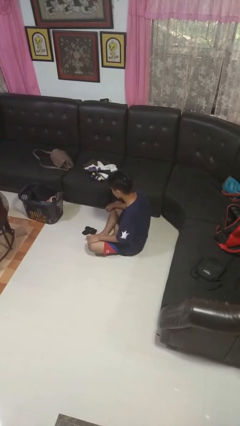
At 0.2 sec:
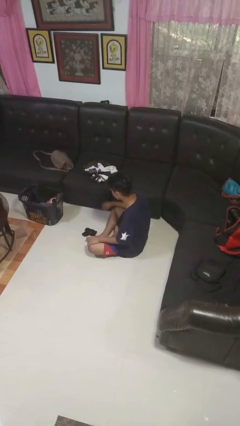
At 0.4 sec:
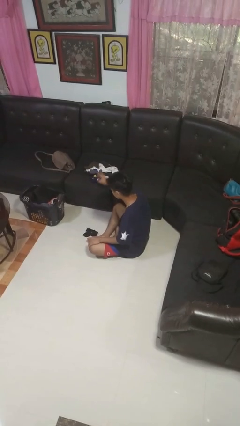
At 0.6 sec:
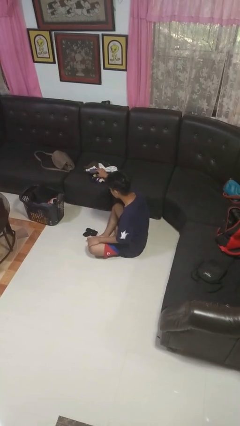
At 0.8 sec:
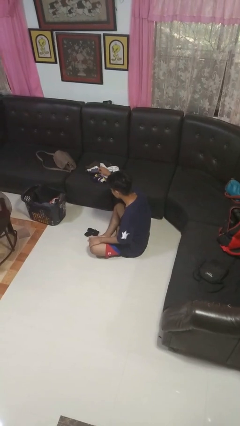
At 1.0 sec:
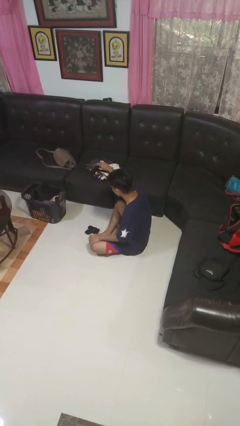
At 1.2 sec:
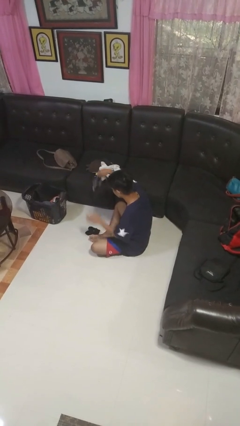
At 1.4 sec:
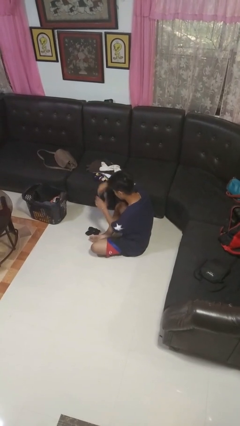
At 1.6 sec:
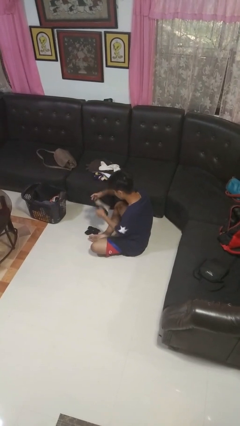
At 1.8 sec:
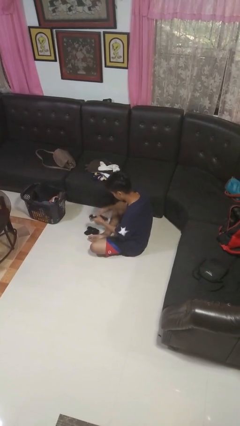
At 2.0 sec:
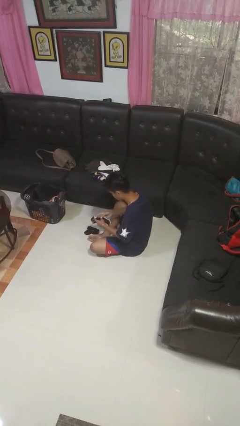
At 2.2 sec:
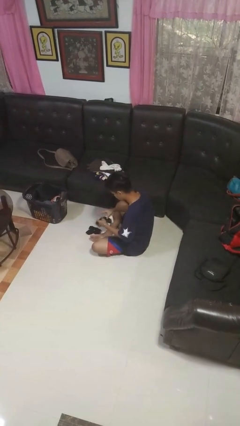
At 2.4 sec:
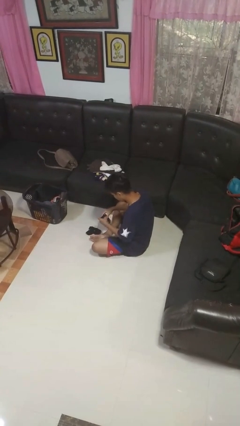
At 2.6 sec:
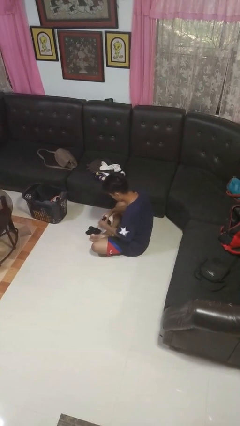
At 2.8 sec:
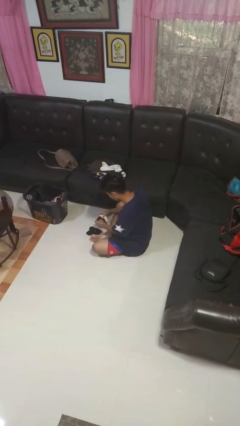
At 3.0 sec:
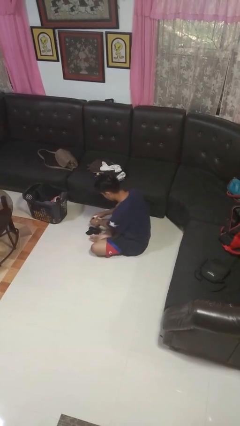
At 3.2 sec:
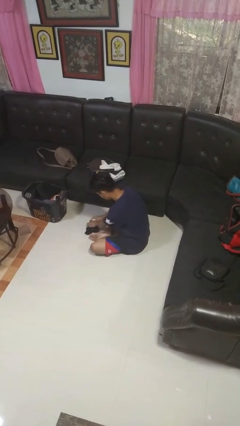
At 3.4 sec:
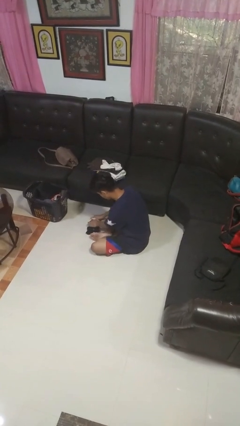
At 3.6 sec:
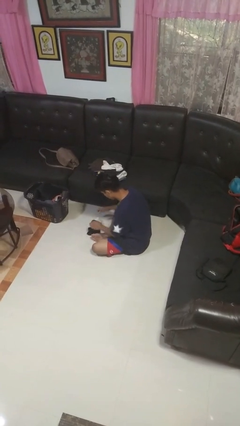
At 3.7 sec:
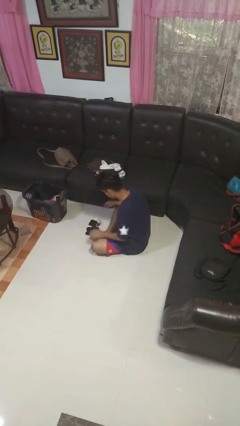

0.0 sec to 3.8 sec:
person folds socks

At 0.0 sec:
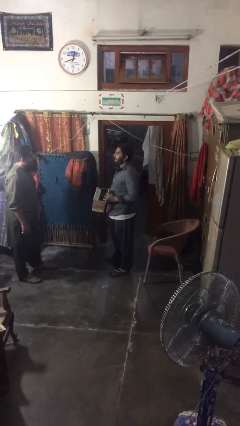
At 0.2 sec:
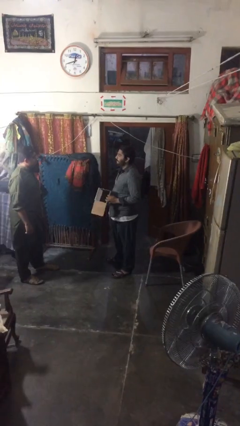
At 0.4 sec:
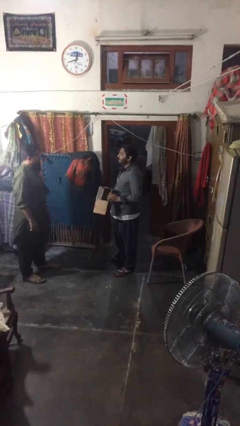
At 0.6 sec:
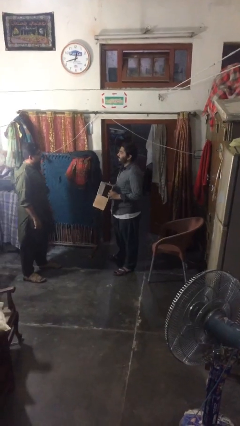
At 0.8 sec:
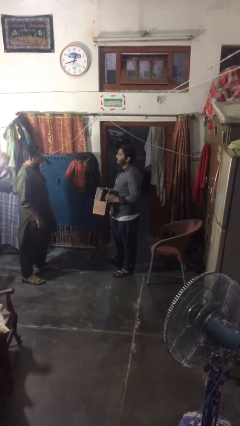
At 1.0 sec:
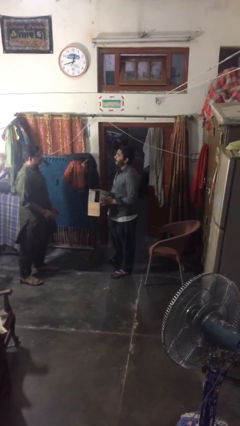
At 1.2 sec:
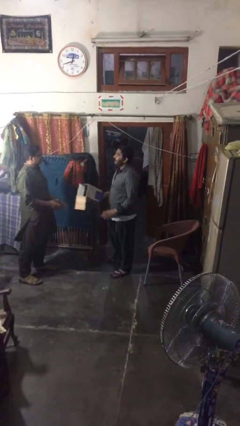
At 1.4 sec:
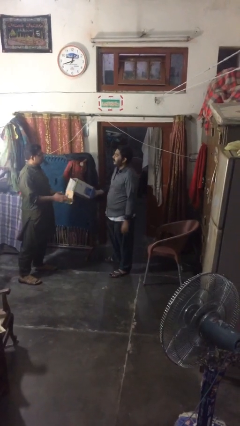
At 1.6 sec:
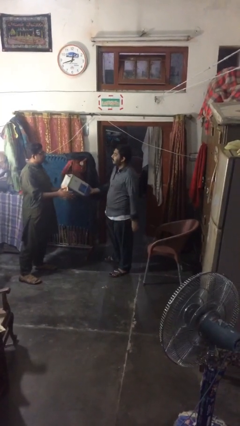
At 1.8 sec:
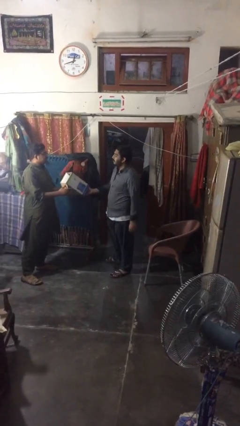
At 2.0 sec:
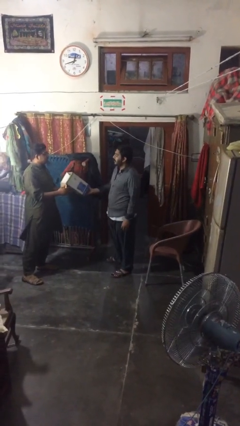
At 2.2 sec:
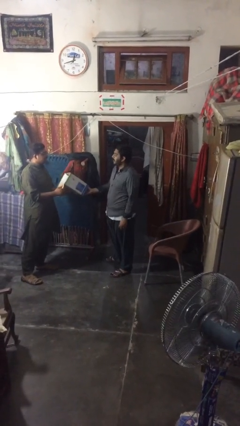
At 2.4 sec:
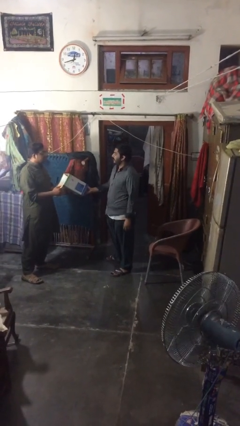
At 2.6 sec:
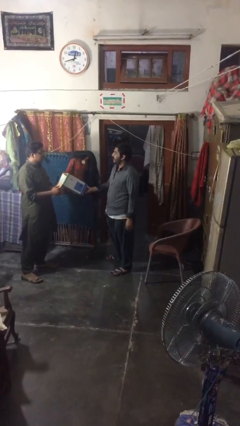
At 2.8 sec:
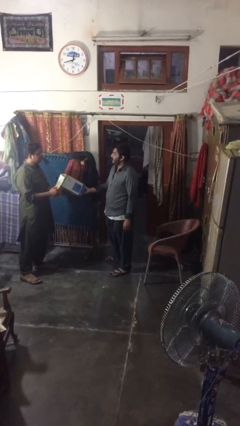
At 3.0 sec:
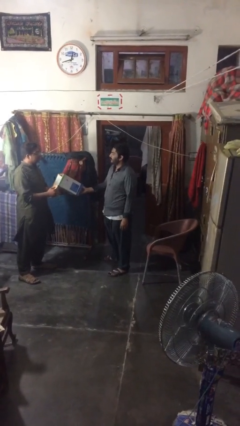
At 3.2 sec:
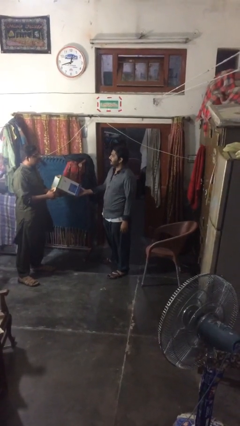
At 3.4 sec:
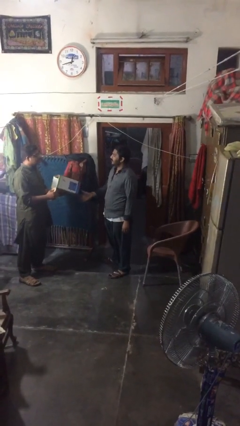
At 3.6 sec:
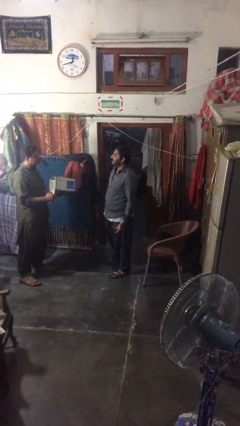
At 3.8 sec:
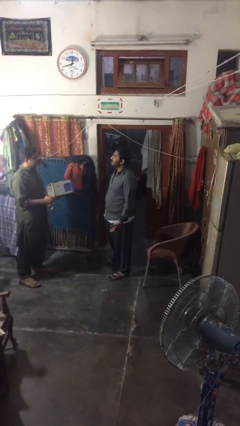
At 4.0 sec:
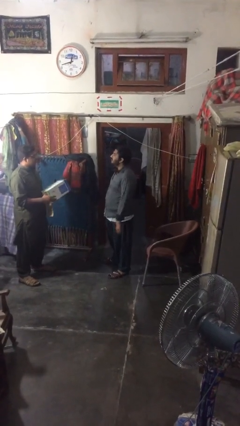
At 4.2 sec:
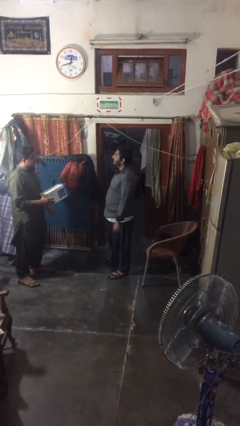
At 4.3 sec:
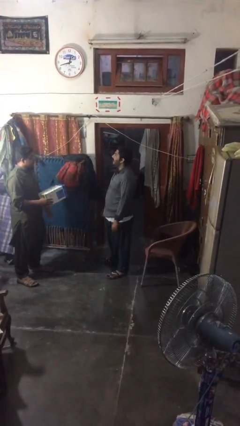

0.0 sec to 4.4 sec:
person transfers object to person

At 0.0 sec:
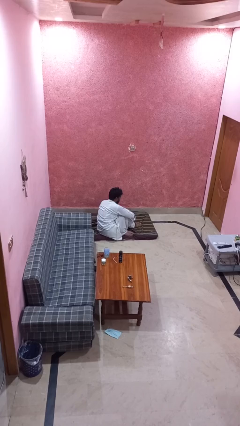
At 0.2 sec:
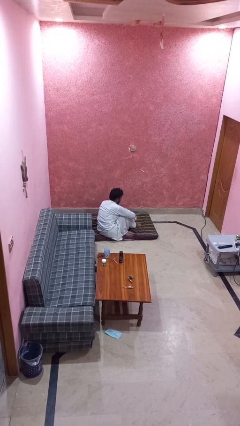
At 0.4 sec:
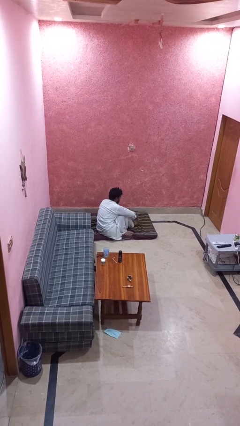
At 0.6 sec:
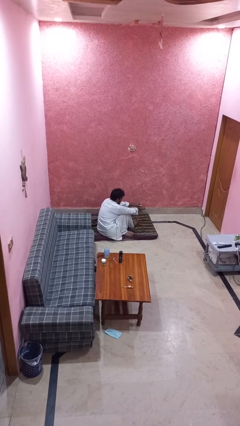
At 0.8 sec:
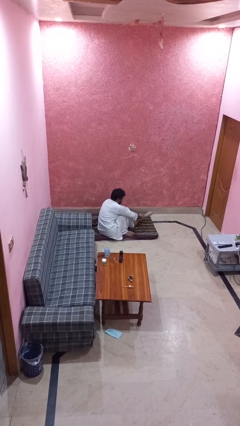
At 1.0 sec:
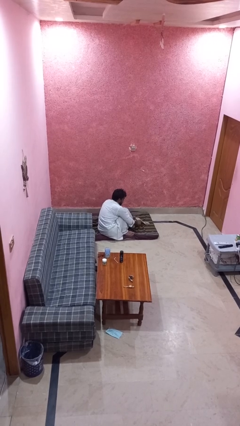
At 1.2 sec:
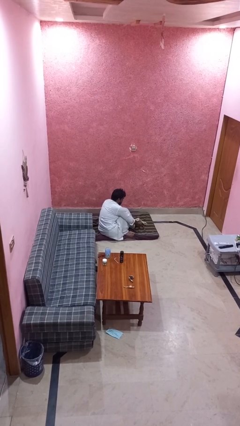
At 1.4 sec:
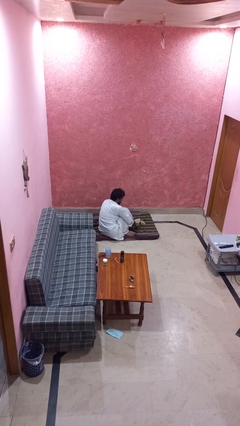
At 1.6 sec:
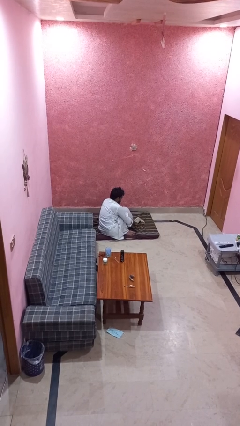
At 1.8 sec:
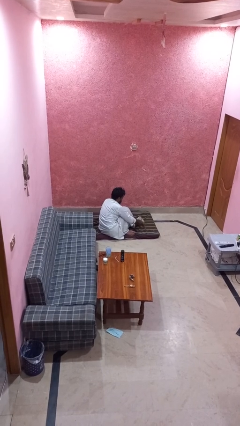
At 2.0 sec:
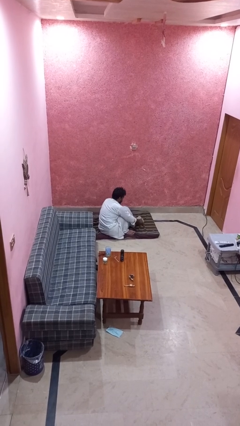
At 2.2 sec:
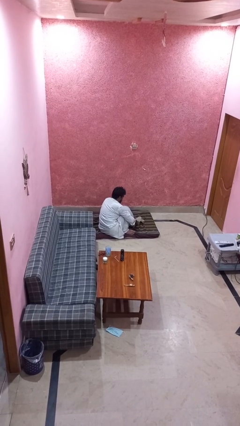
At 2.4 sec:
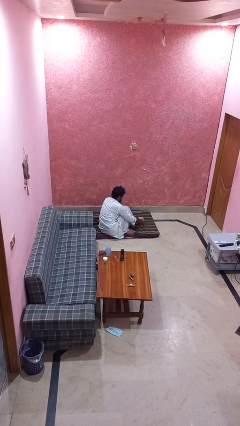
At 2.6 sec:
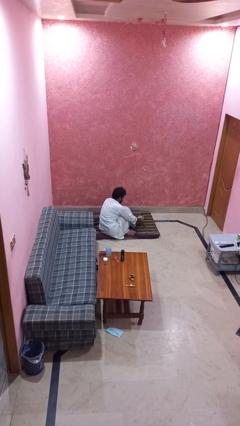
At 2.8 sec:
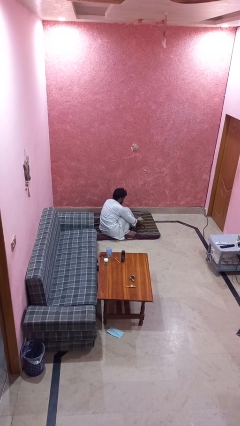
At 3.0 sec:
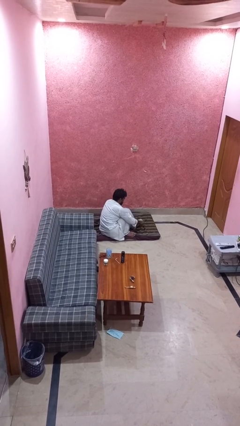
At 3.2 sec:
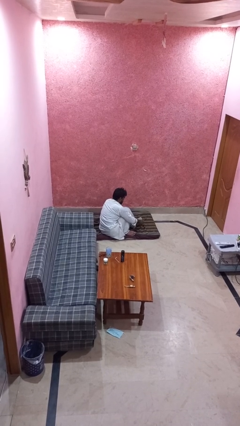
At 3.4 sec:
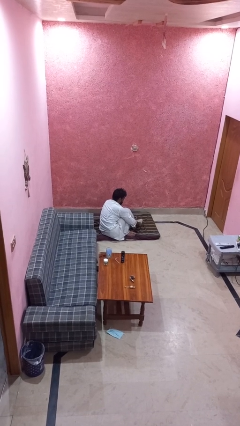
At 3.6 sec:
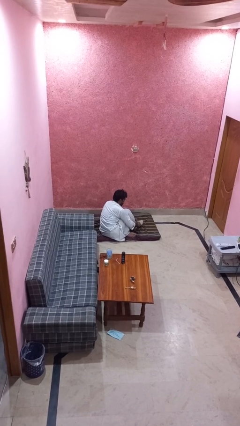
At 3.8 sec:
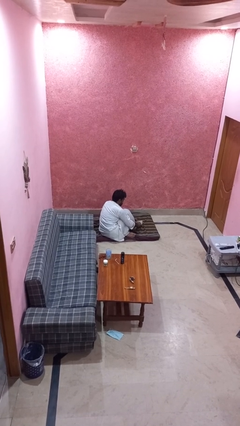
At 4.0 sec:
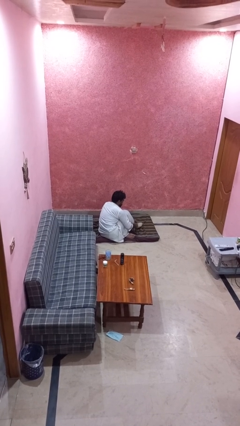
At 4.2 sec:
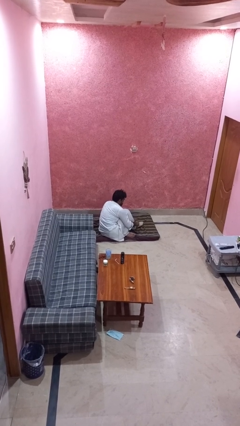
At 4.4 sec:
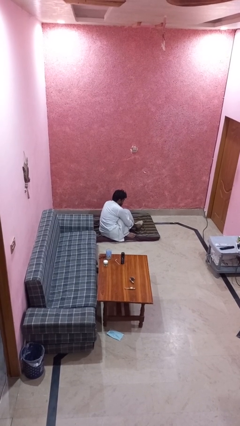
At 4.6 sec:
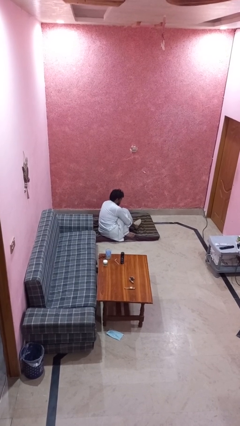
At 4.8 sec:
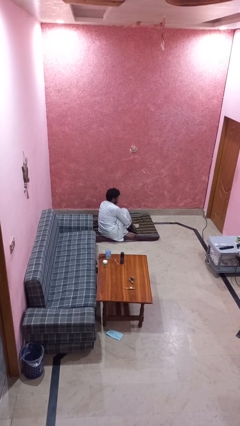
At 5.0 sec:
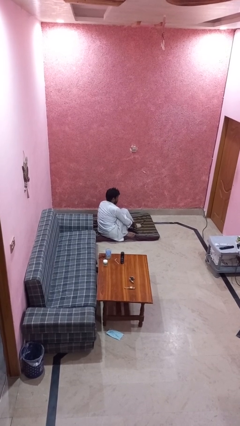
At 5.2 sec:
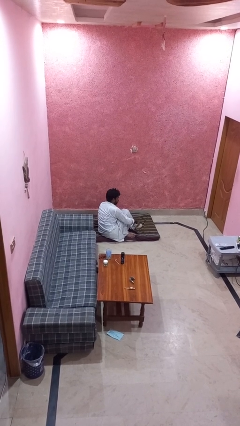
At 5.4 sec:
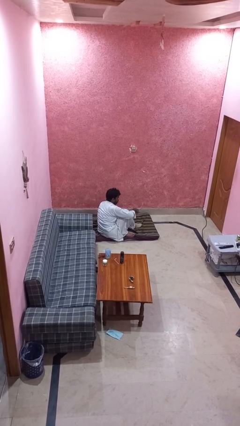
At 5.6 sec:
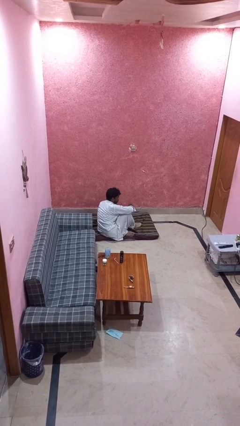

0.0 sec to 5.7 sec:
person puts on socks

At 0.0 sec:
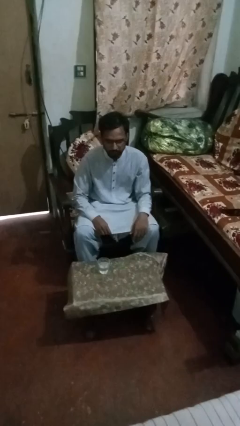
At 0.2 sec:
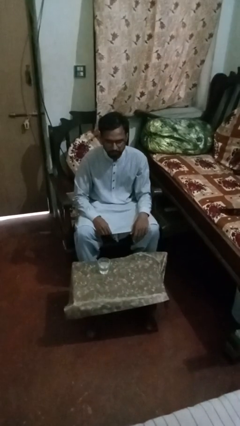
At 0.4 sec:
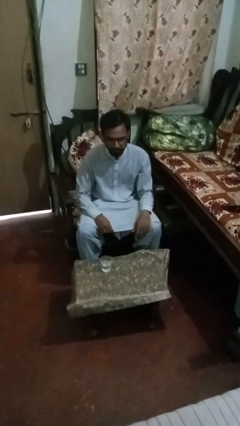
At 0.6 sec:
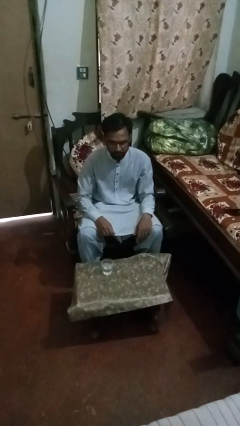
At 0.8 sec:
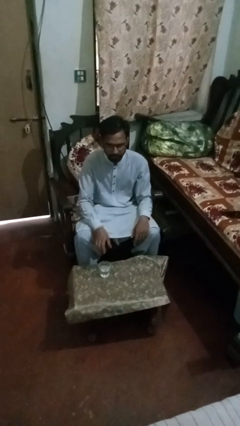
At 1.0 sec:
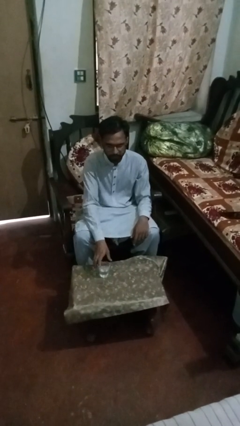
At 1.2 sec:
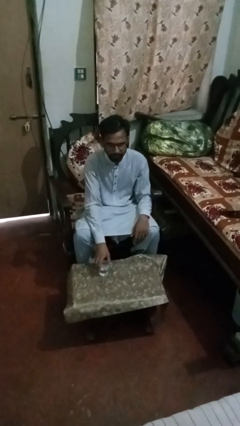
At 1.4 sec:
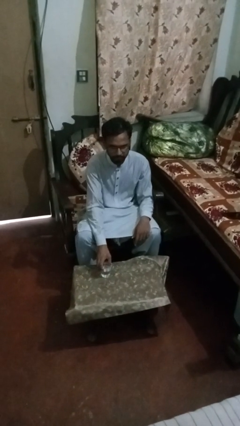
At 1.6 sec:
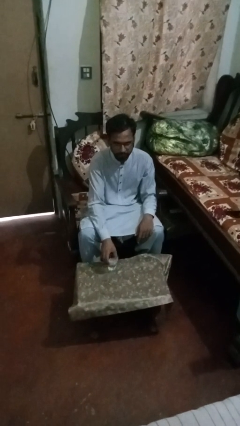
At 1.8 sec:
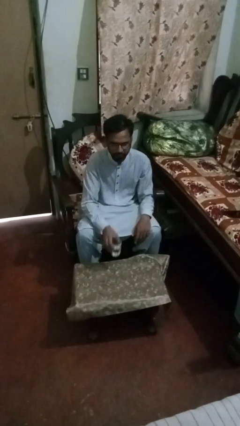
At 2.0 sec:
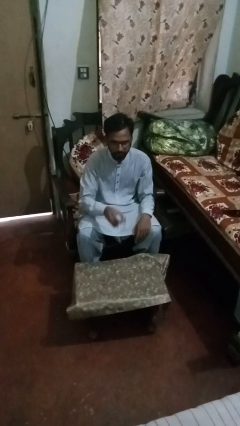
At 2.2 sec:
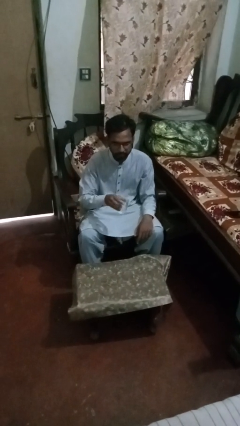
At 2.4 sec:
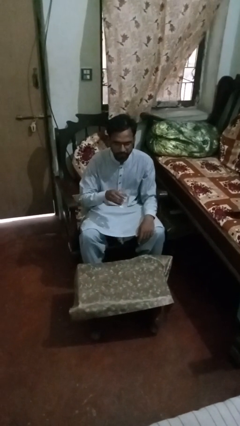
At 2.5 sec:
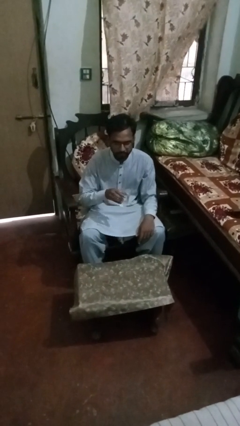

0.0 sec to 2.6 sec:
person picks up object from table

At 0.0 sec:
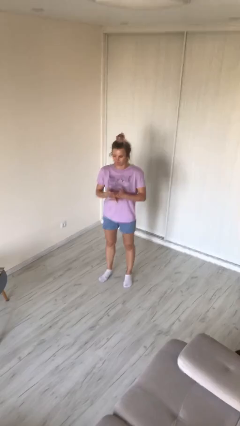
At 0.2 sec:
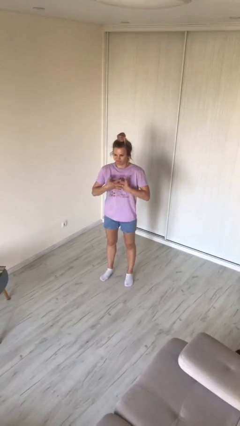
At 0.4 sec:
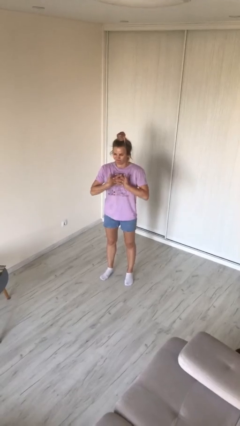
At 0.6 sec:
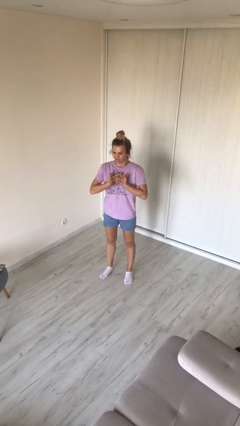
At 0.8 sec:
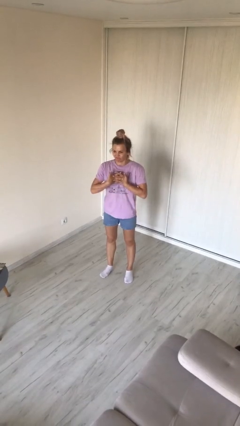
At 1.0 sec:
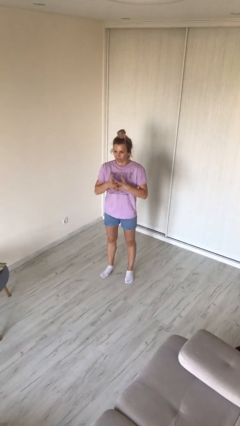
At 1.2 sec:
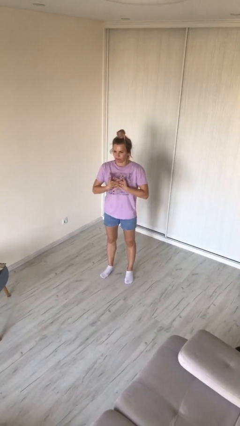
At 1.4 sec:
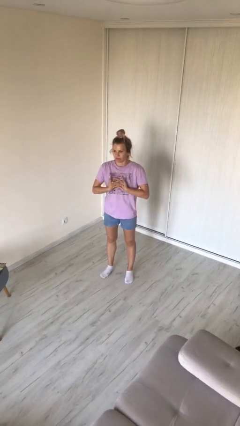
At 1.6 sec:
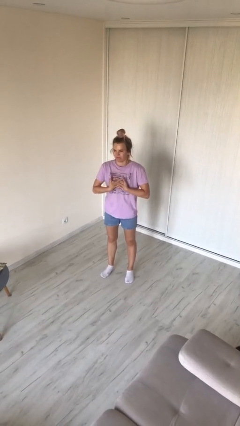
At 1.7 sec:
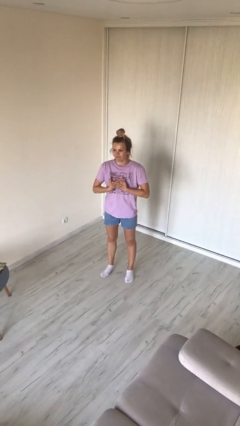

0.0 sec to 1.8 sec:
person cracks knuckles
